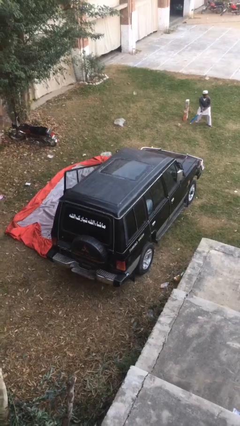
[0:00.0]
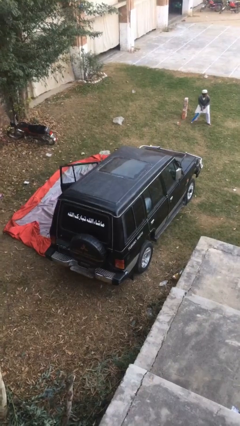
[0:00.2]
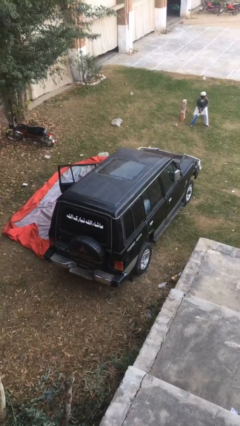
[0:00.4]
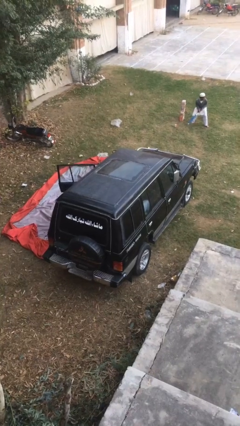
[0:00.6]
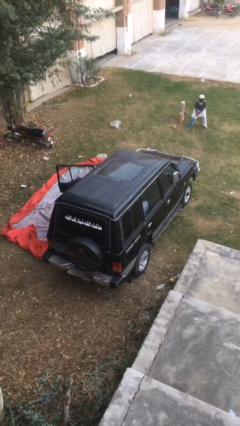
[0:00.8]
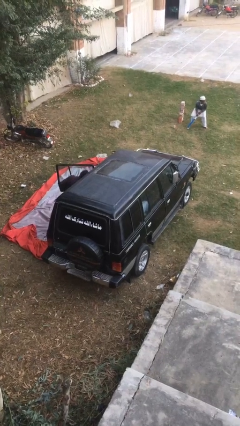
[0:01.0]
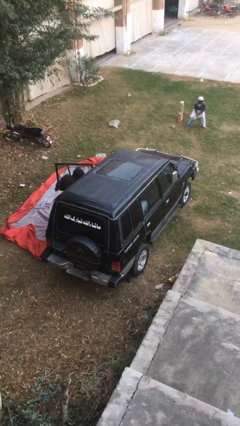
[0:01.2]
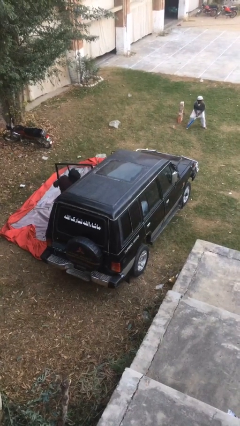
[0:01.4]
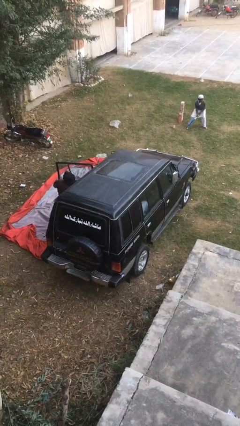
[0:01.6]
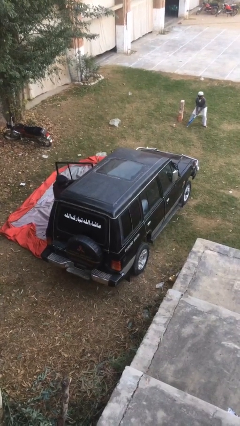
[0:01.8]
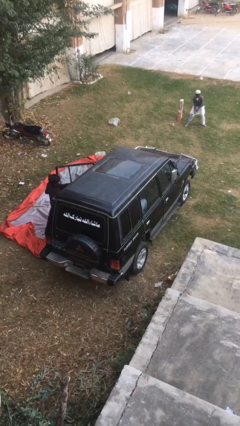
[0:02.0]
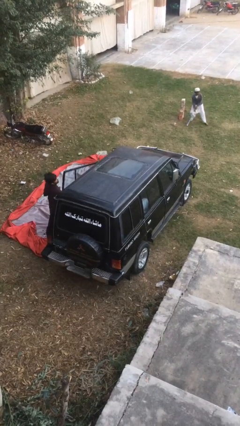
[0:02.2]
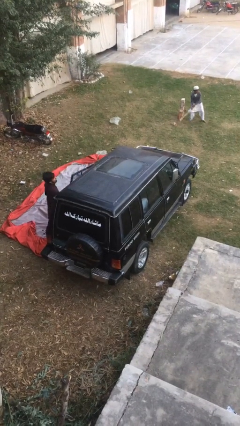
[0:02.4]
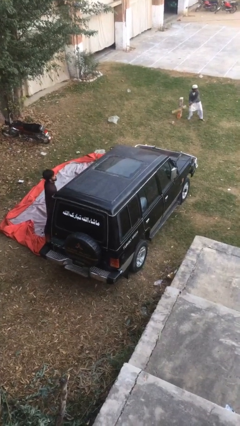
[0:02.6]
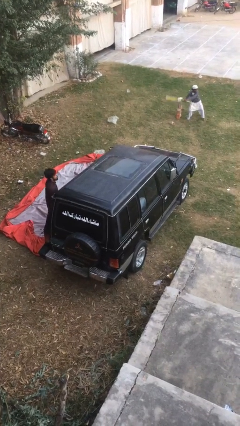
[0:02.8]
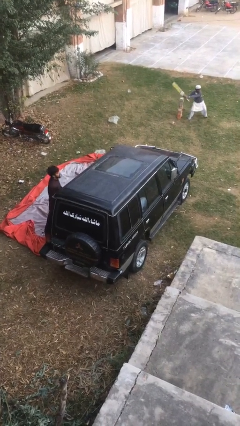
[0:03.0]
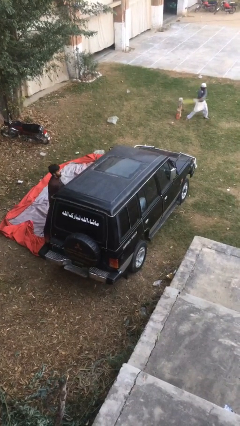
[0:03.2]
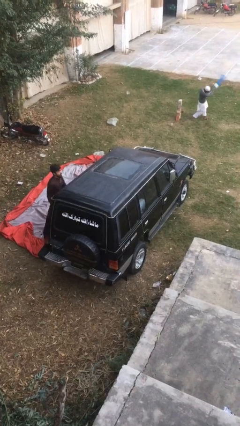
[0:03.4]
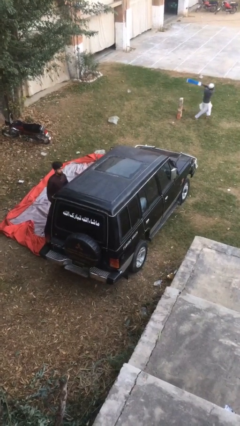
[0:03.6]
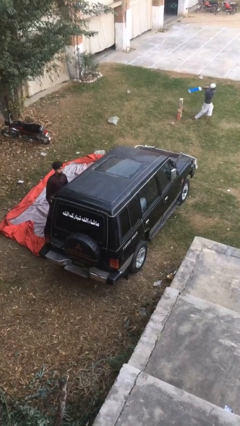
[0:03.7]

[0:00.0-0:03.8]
car drops off person

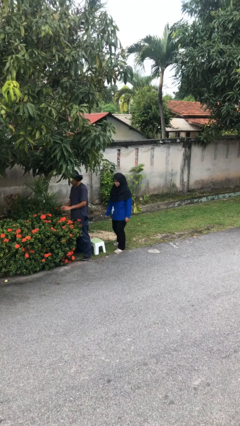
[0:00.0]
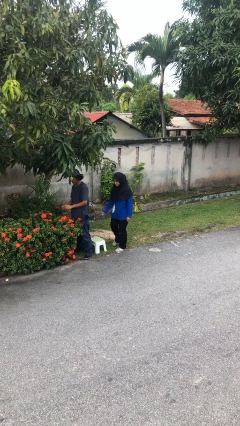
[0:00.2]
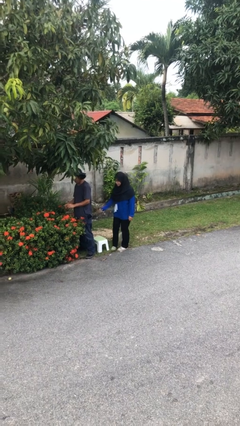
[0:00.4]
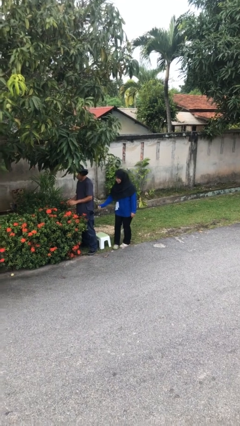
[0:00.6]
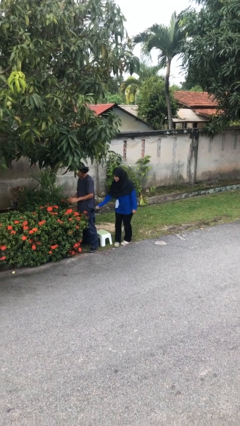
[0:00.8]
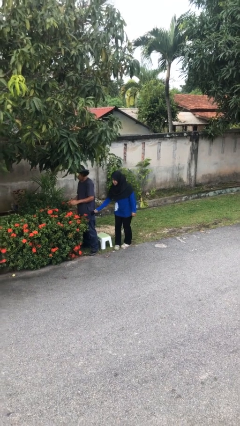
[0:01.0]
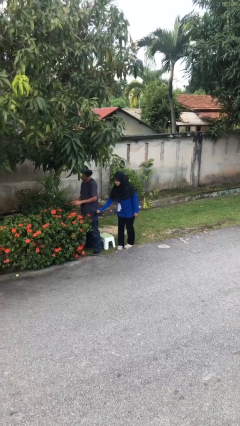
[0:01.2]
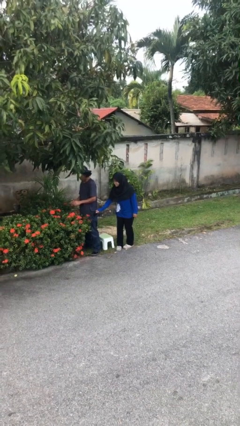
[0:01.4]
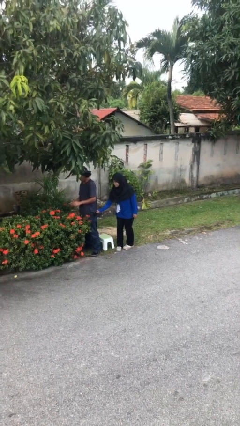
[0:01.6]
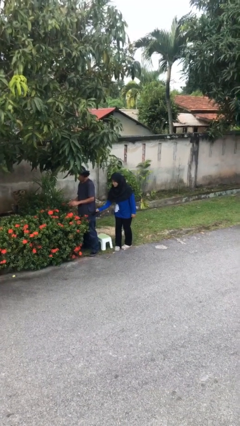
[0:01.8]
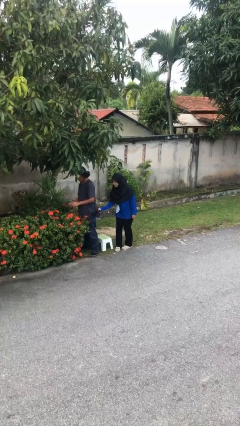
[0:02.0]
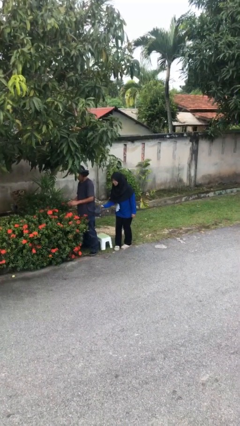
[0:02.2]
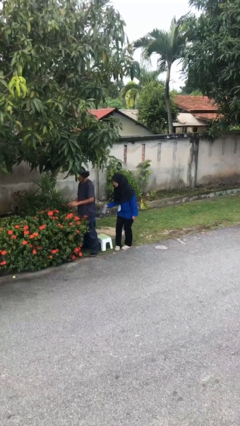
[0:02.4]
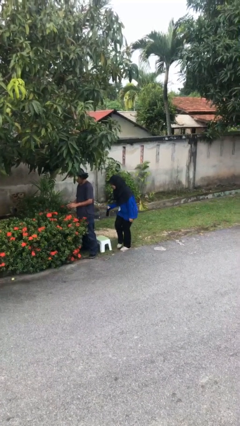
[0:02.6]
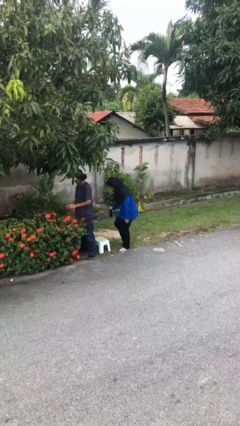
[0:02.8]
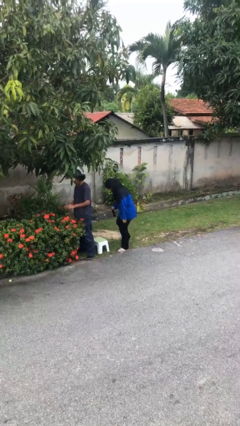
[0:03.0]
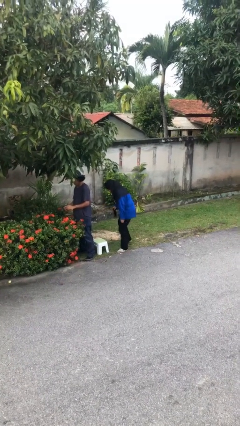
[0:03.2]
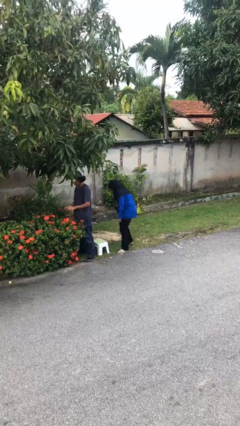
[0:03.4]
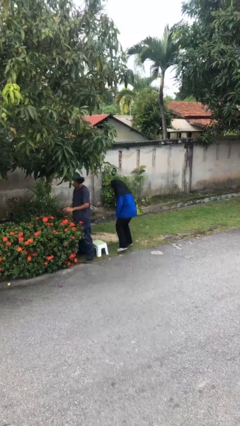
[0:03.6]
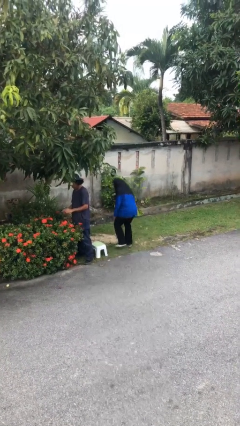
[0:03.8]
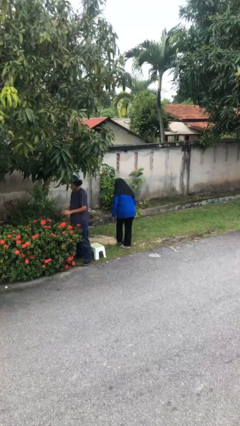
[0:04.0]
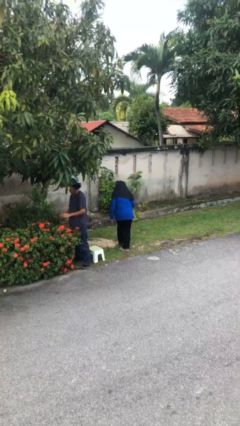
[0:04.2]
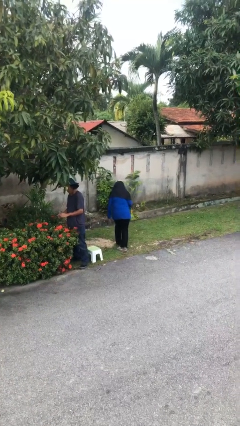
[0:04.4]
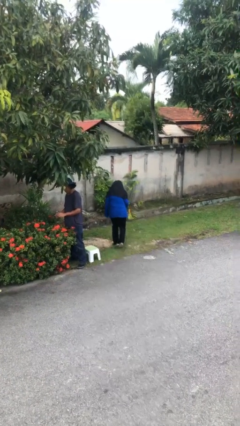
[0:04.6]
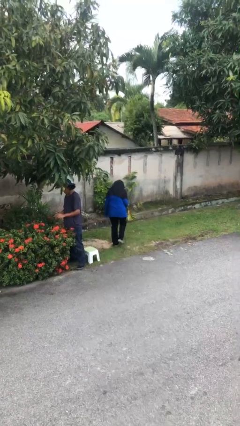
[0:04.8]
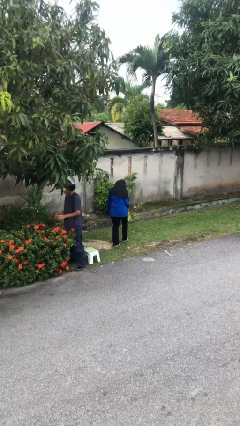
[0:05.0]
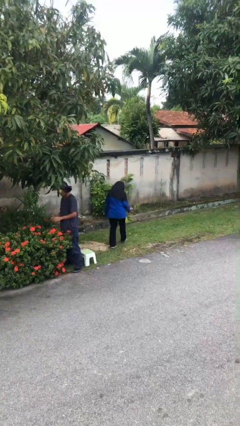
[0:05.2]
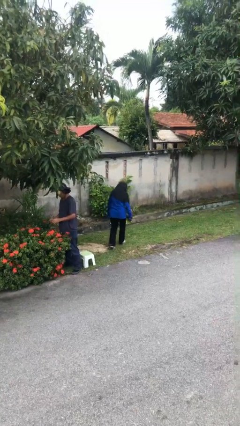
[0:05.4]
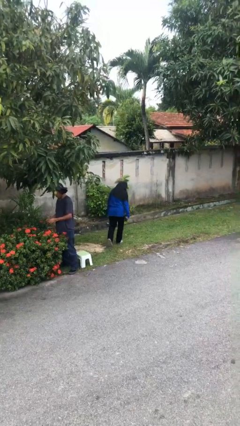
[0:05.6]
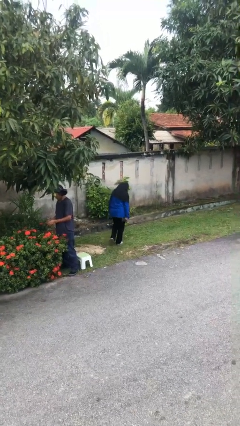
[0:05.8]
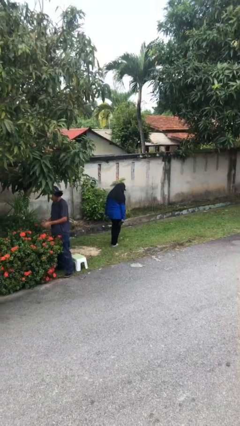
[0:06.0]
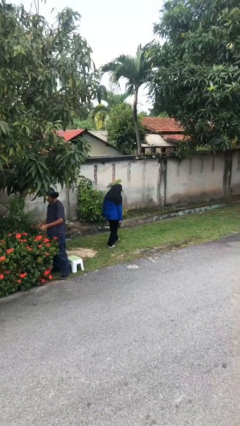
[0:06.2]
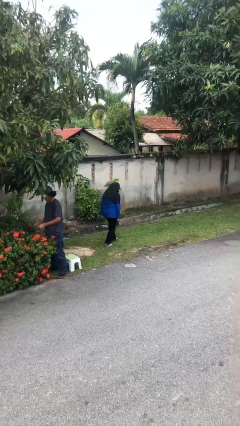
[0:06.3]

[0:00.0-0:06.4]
person steals object from person

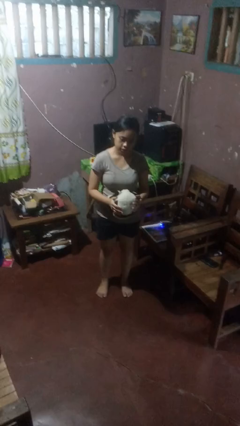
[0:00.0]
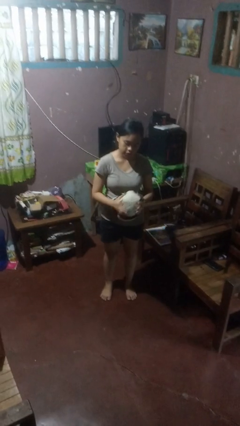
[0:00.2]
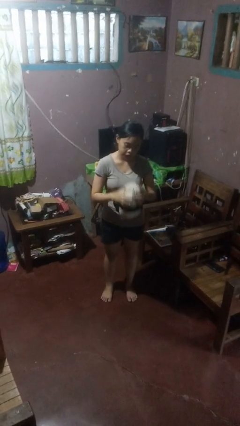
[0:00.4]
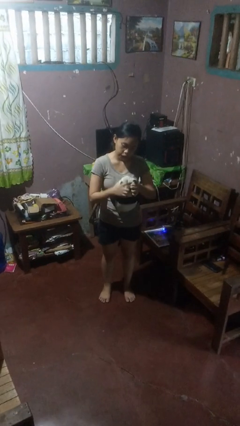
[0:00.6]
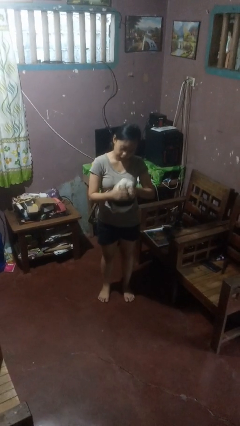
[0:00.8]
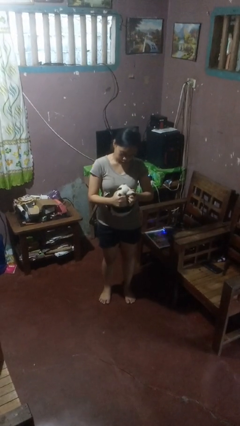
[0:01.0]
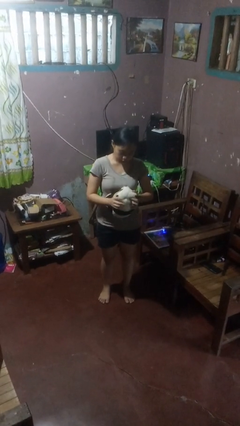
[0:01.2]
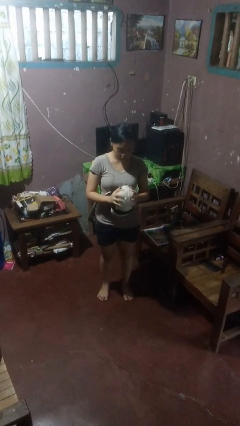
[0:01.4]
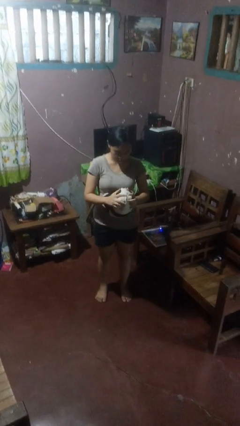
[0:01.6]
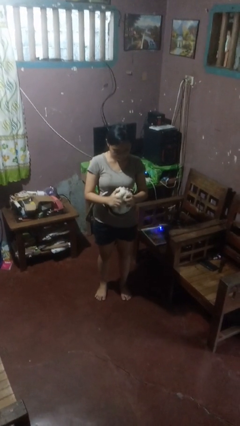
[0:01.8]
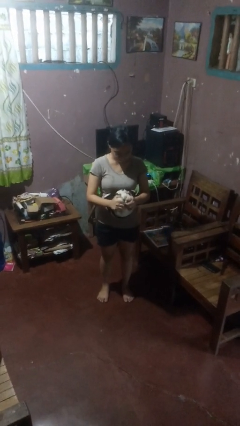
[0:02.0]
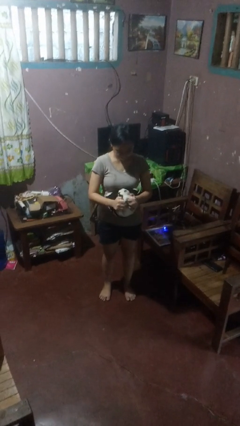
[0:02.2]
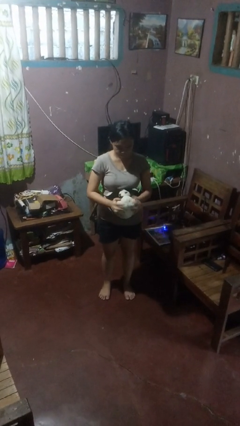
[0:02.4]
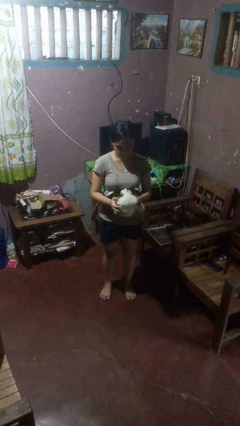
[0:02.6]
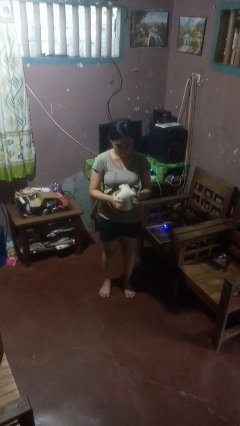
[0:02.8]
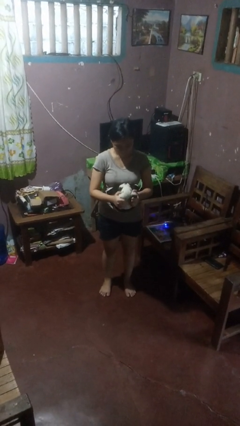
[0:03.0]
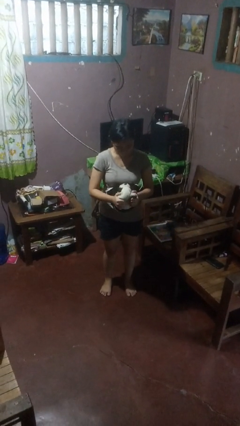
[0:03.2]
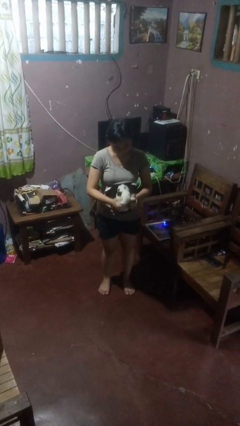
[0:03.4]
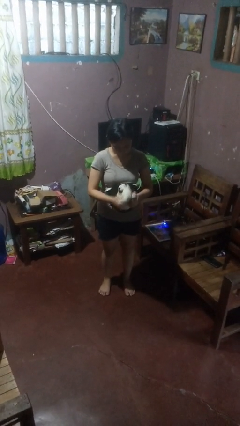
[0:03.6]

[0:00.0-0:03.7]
person squeezes object

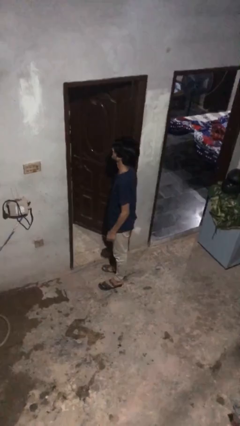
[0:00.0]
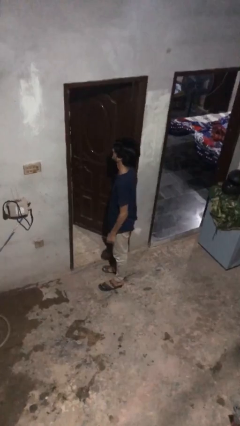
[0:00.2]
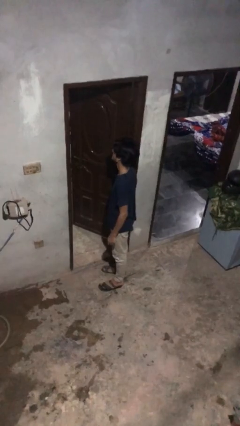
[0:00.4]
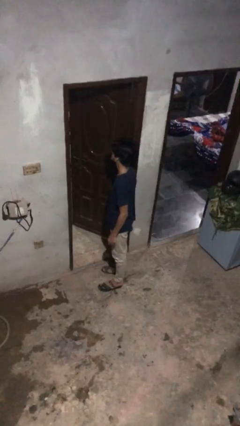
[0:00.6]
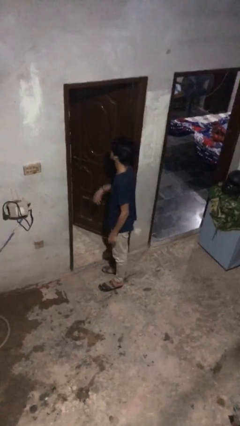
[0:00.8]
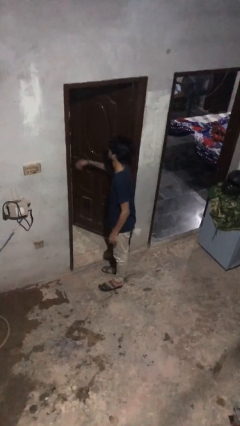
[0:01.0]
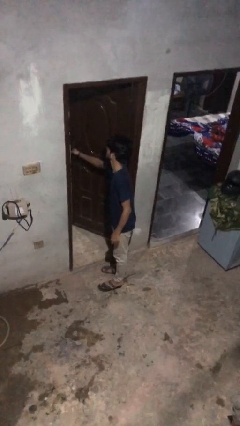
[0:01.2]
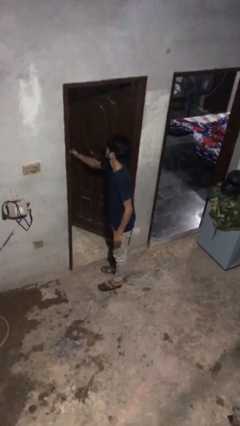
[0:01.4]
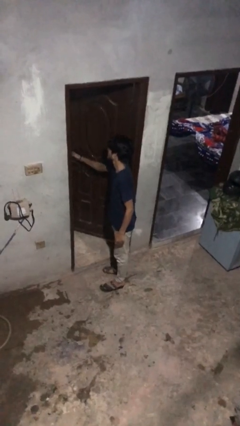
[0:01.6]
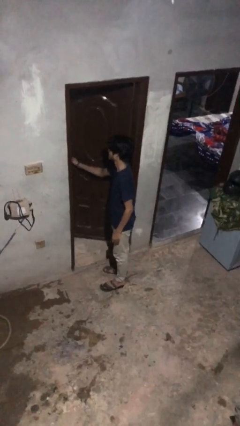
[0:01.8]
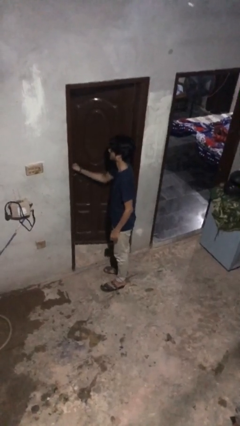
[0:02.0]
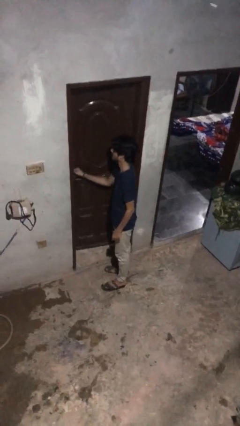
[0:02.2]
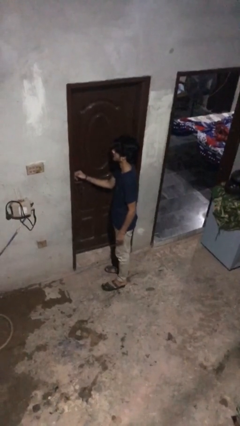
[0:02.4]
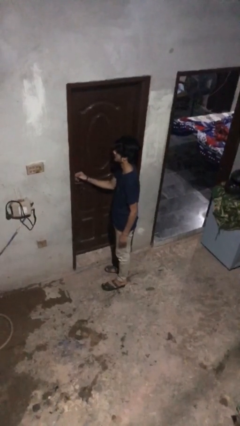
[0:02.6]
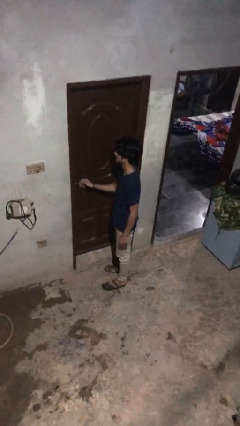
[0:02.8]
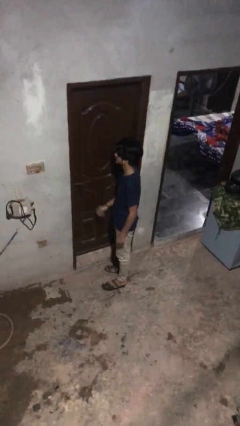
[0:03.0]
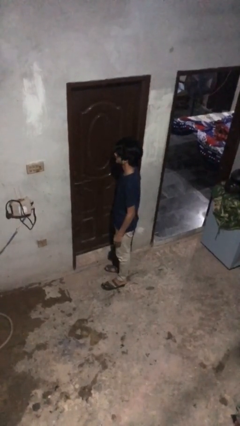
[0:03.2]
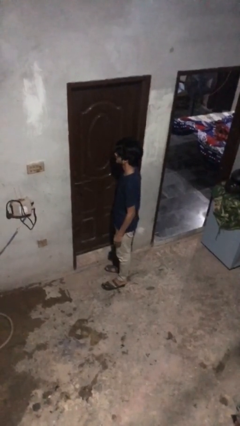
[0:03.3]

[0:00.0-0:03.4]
person closes facility door

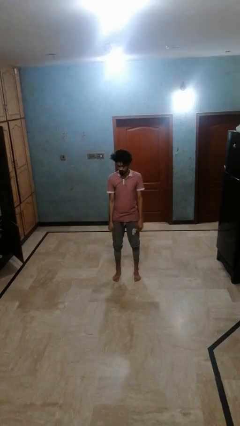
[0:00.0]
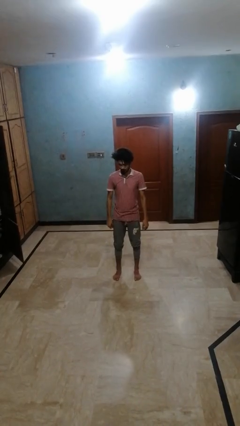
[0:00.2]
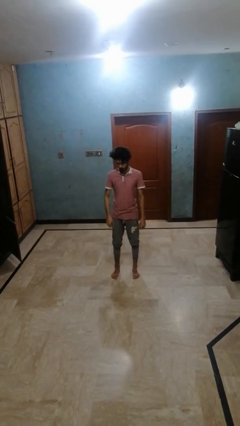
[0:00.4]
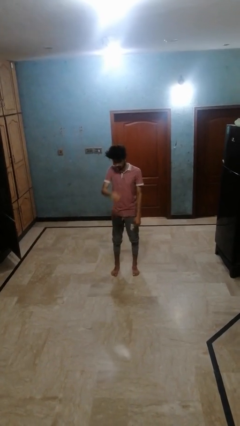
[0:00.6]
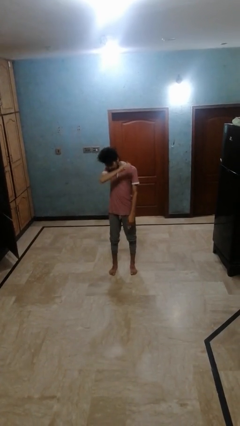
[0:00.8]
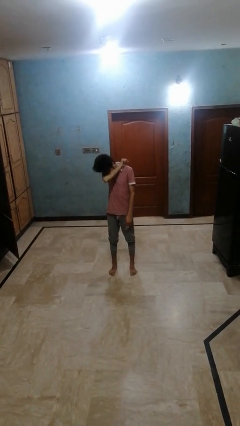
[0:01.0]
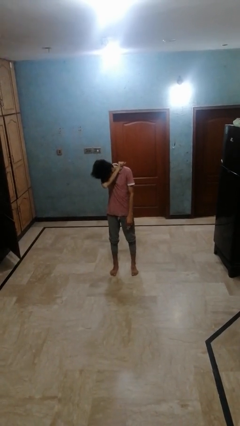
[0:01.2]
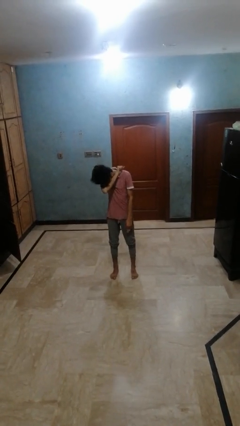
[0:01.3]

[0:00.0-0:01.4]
person sneezes into arm
